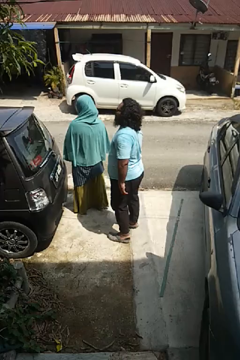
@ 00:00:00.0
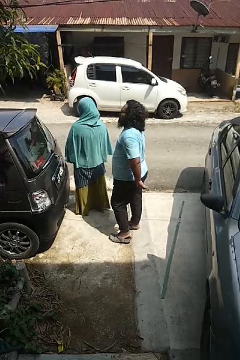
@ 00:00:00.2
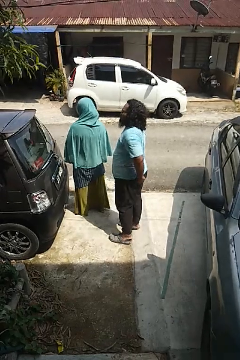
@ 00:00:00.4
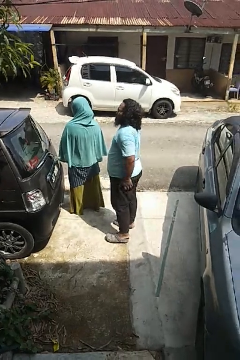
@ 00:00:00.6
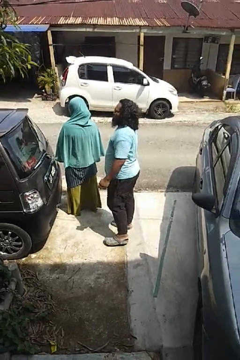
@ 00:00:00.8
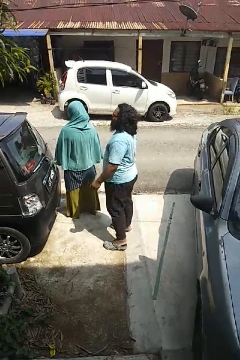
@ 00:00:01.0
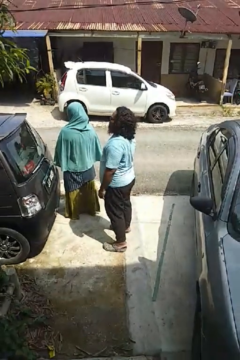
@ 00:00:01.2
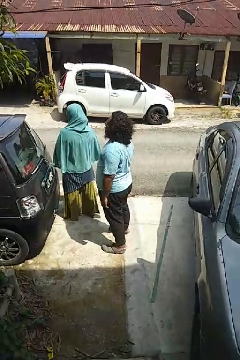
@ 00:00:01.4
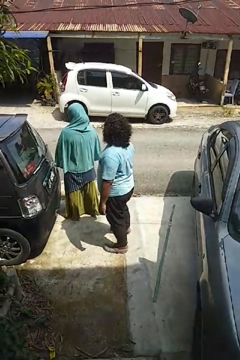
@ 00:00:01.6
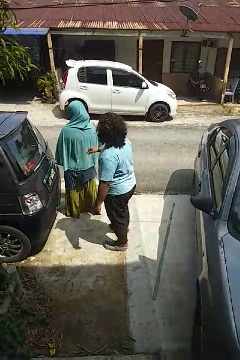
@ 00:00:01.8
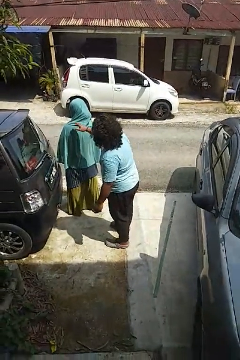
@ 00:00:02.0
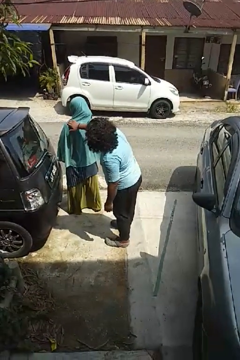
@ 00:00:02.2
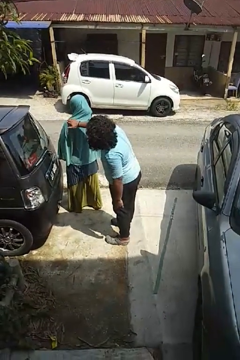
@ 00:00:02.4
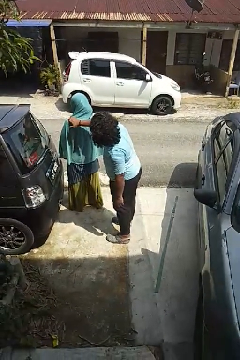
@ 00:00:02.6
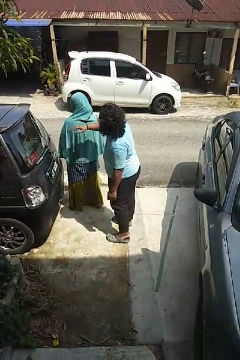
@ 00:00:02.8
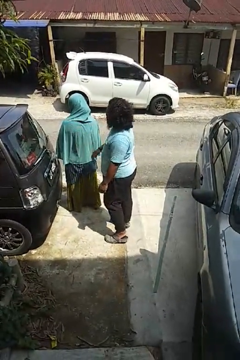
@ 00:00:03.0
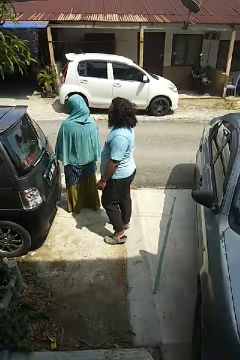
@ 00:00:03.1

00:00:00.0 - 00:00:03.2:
person touches back of person

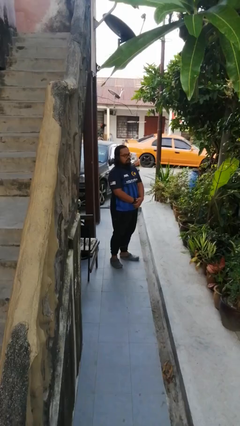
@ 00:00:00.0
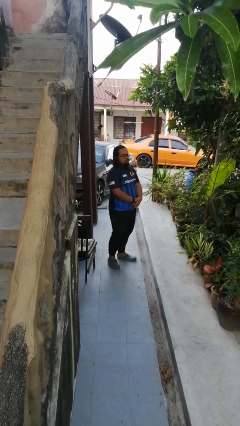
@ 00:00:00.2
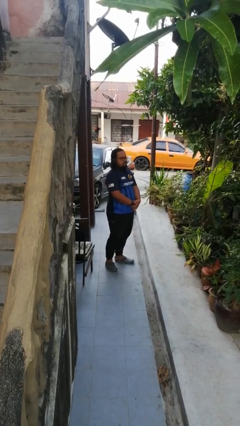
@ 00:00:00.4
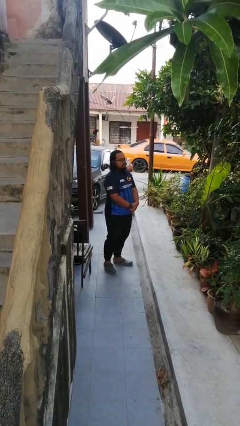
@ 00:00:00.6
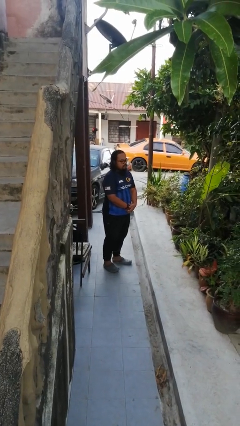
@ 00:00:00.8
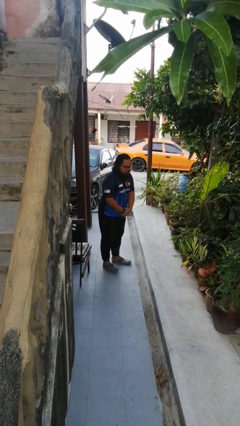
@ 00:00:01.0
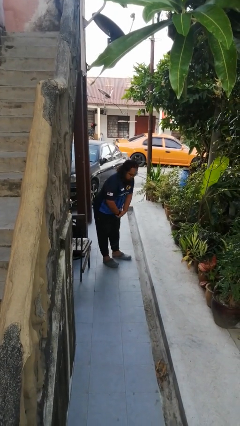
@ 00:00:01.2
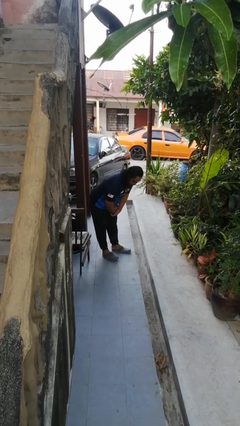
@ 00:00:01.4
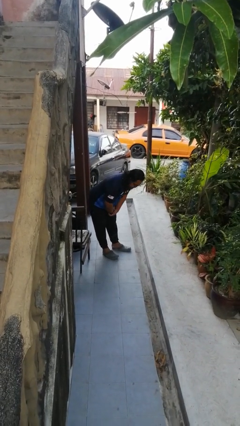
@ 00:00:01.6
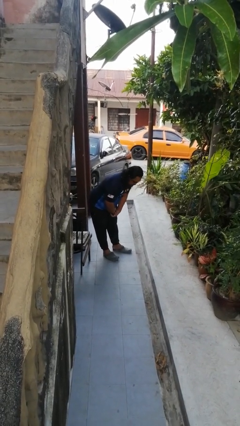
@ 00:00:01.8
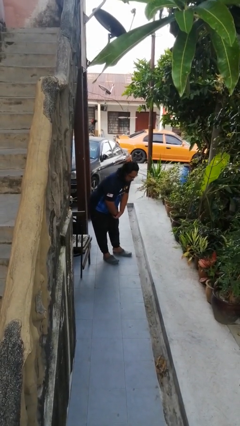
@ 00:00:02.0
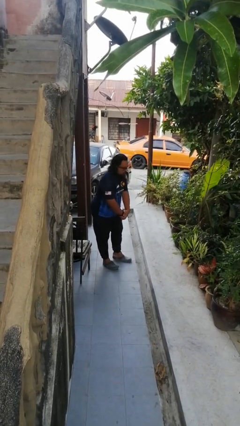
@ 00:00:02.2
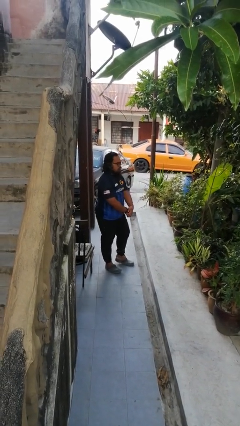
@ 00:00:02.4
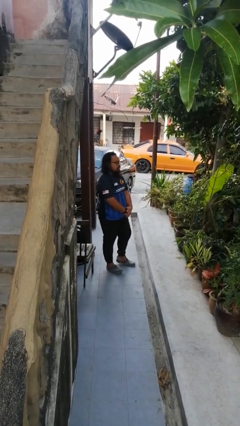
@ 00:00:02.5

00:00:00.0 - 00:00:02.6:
person bows

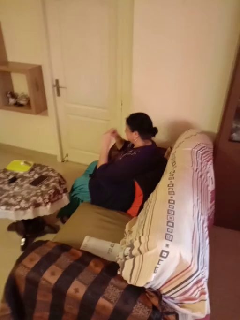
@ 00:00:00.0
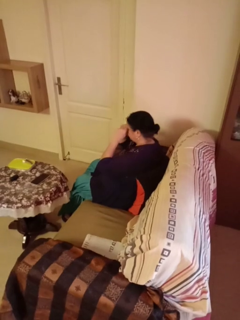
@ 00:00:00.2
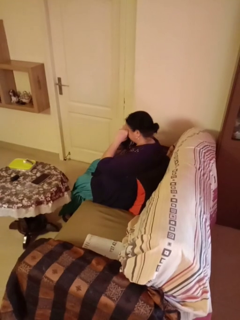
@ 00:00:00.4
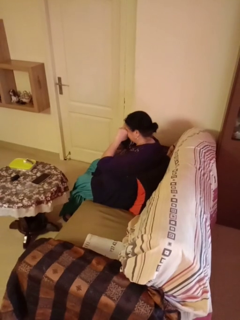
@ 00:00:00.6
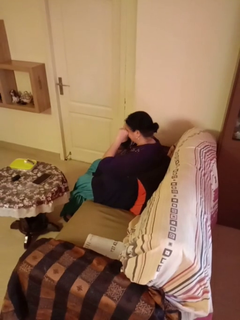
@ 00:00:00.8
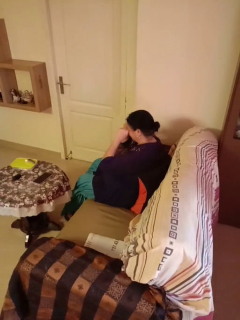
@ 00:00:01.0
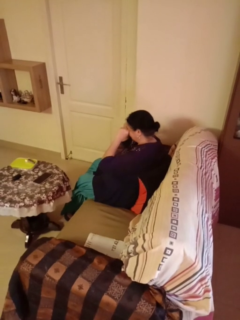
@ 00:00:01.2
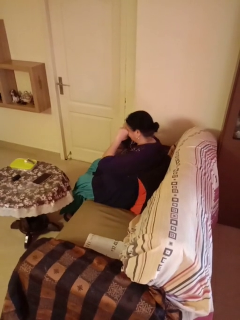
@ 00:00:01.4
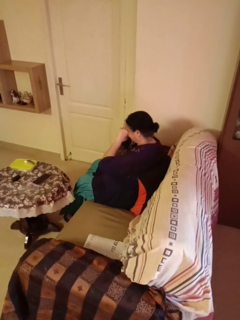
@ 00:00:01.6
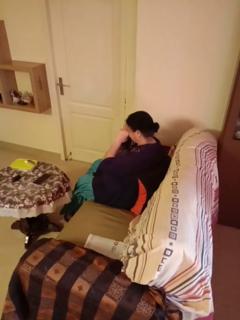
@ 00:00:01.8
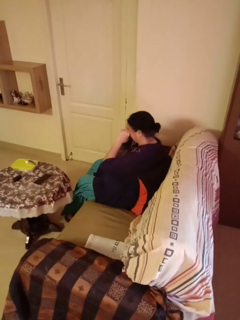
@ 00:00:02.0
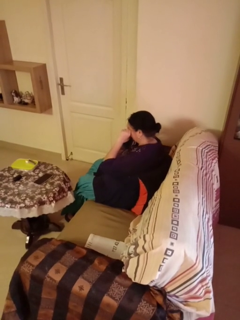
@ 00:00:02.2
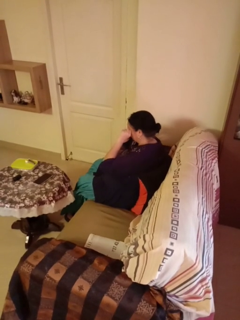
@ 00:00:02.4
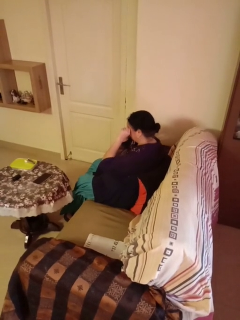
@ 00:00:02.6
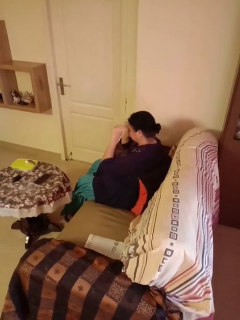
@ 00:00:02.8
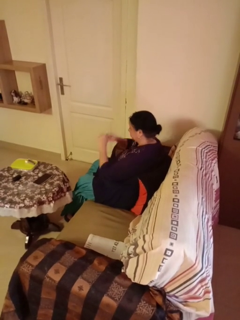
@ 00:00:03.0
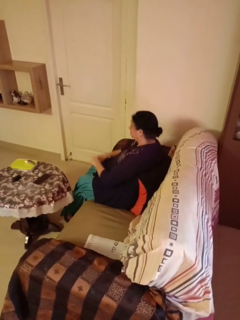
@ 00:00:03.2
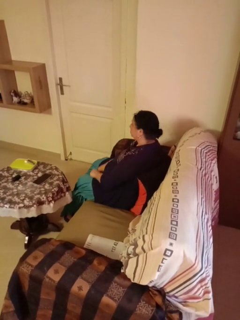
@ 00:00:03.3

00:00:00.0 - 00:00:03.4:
person rubs eyes

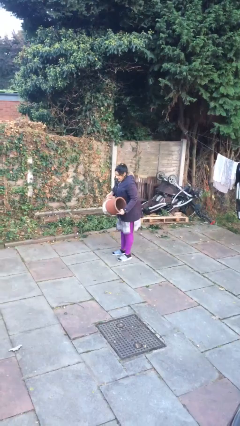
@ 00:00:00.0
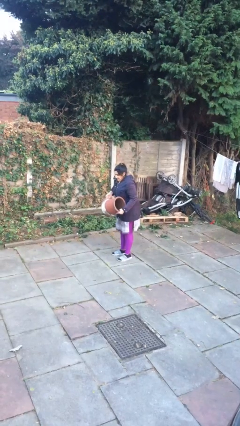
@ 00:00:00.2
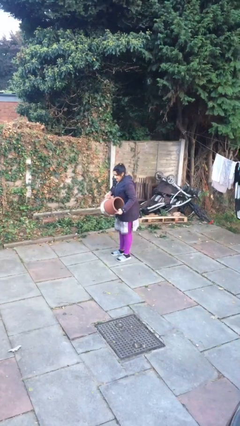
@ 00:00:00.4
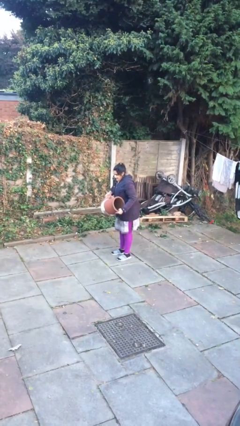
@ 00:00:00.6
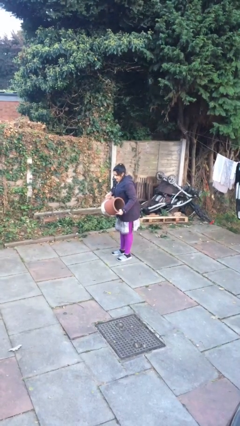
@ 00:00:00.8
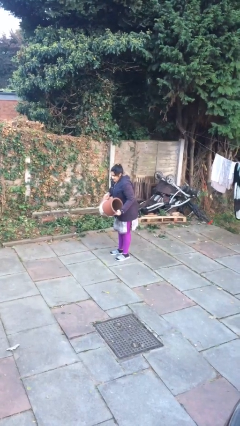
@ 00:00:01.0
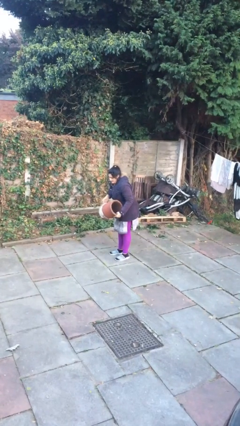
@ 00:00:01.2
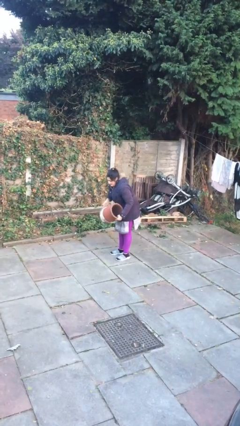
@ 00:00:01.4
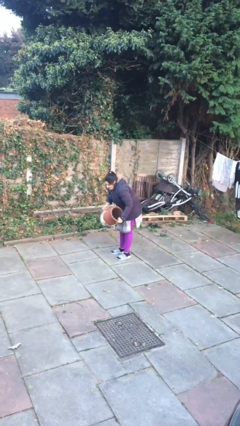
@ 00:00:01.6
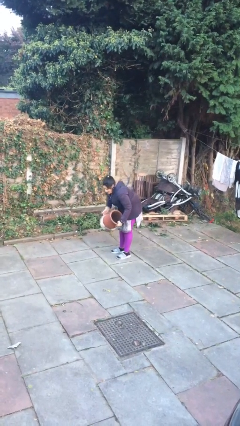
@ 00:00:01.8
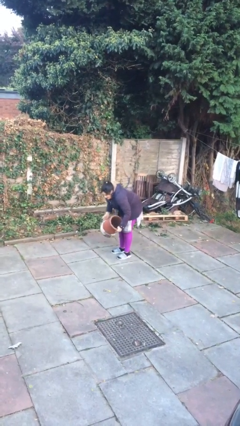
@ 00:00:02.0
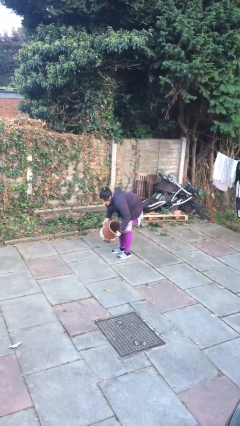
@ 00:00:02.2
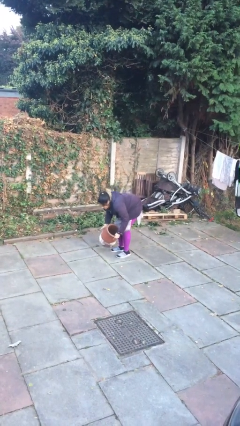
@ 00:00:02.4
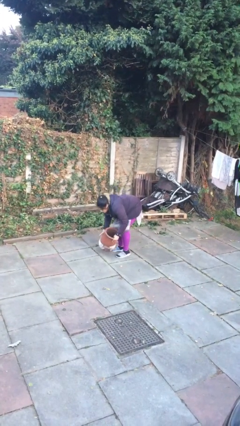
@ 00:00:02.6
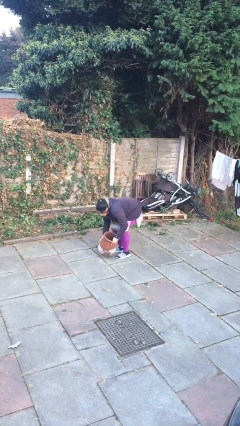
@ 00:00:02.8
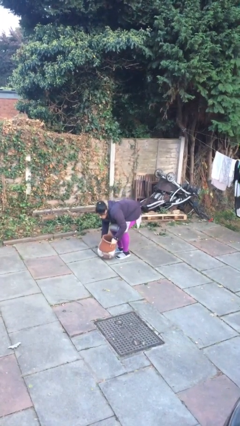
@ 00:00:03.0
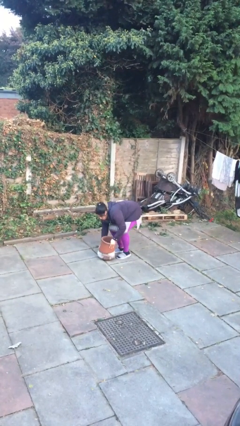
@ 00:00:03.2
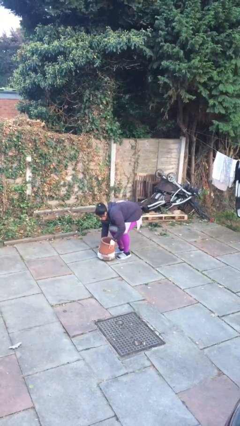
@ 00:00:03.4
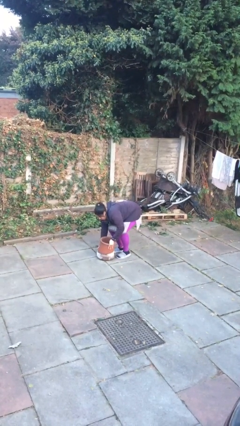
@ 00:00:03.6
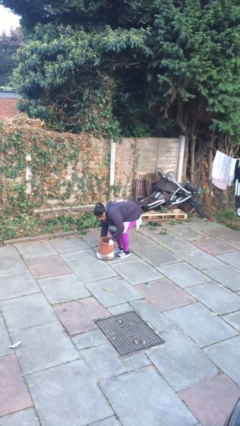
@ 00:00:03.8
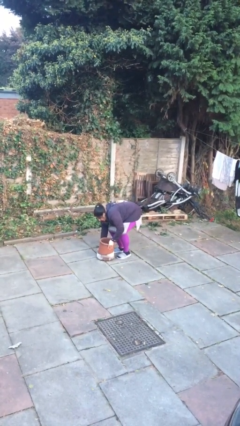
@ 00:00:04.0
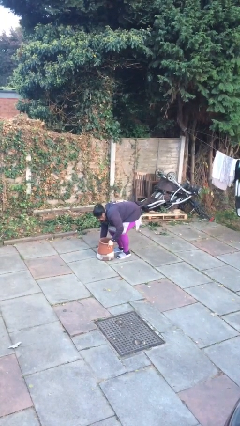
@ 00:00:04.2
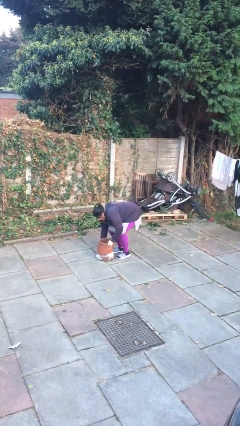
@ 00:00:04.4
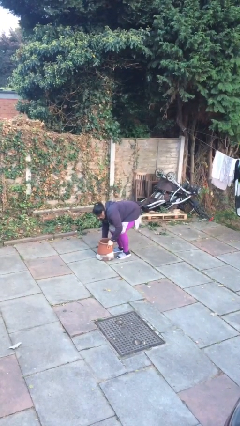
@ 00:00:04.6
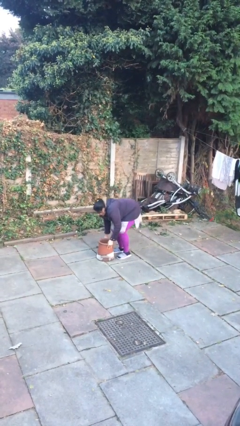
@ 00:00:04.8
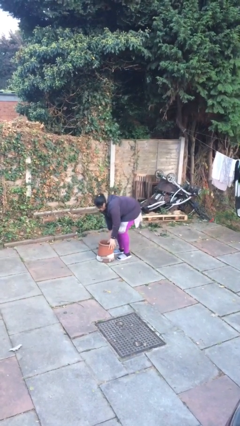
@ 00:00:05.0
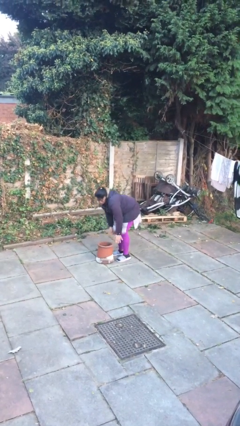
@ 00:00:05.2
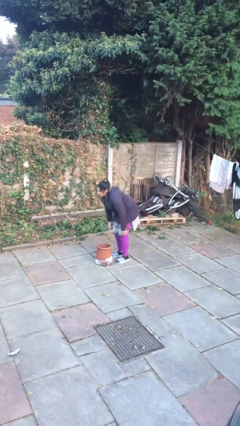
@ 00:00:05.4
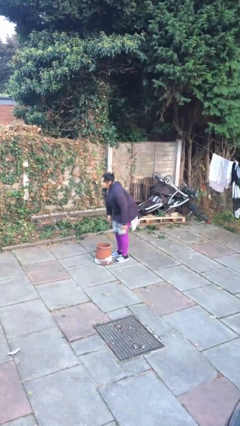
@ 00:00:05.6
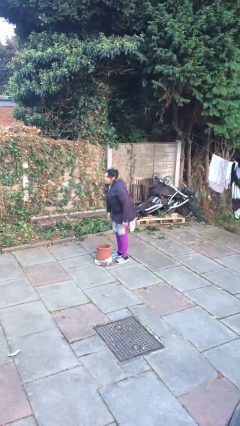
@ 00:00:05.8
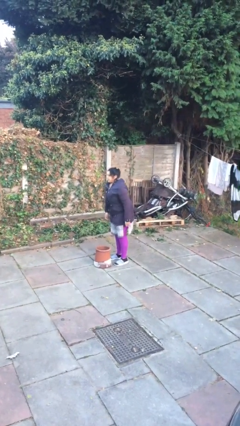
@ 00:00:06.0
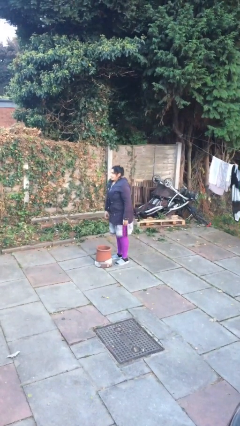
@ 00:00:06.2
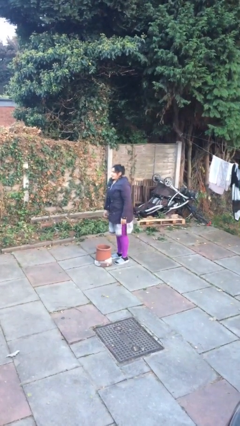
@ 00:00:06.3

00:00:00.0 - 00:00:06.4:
person puts down object on floor

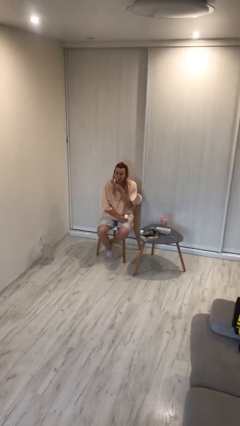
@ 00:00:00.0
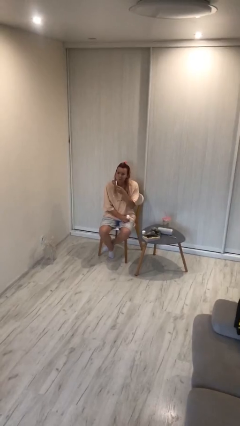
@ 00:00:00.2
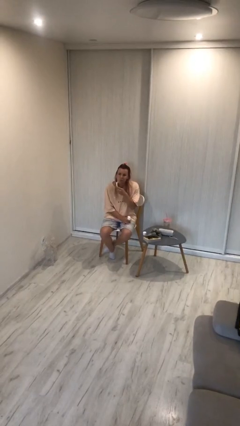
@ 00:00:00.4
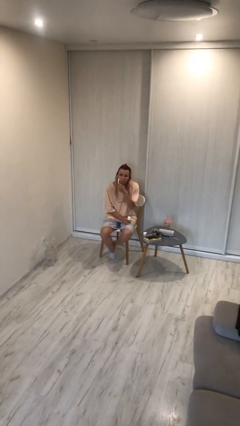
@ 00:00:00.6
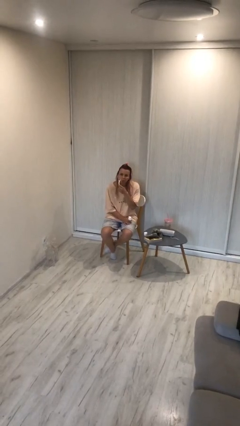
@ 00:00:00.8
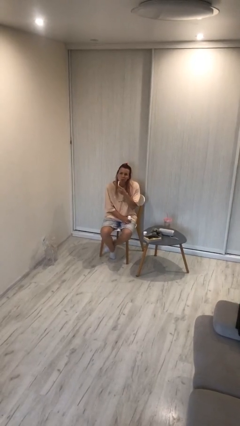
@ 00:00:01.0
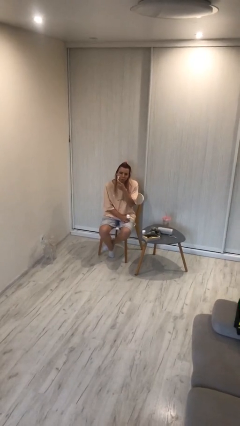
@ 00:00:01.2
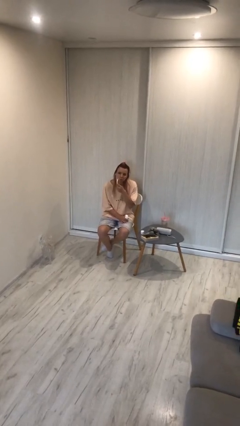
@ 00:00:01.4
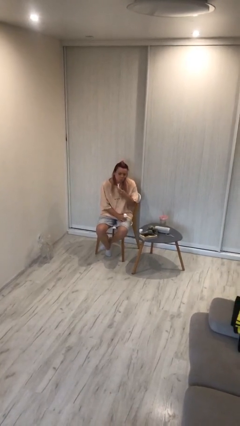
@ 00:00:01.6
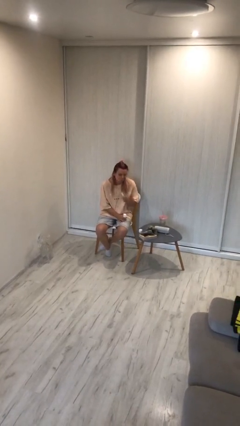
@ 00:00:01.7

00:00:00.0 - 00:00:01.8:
person shaves face

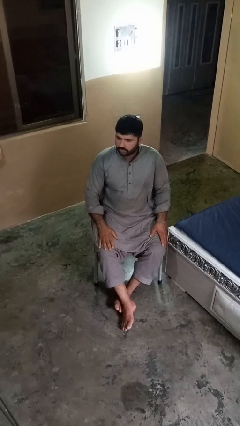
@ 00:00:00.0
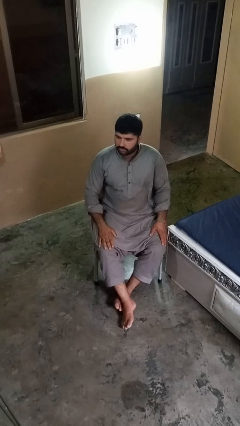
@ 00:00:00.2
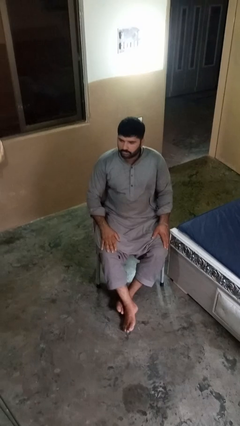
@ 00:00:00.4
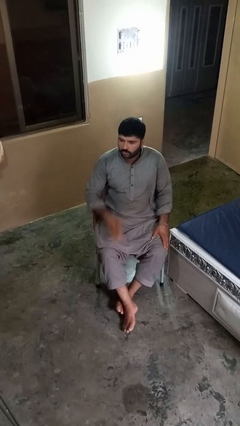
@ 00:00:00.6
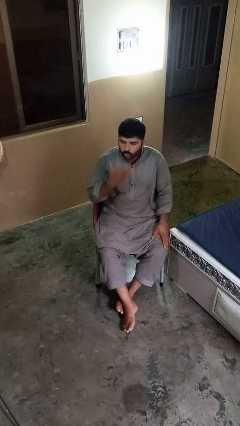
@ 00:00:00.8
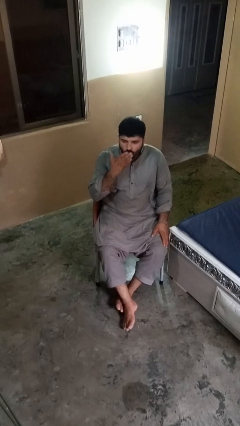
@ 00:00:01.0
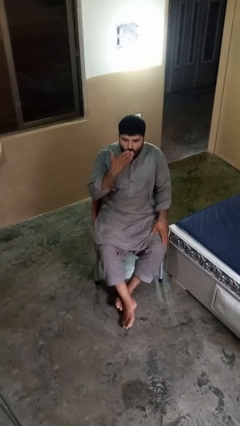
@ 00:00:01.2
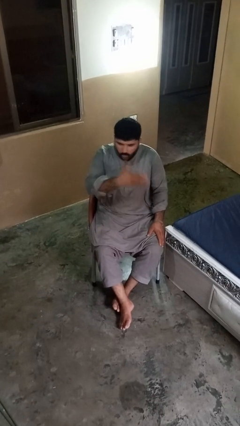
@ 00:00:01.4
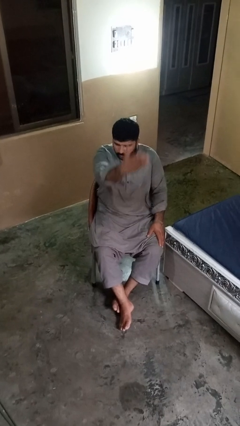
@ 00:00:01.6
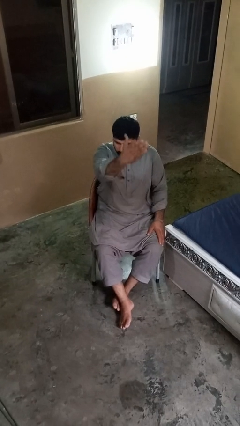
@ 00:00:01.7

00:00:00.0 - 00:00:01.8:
person gestures blow kiss
